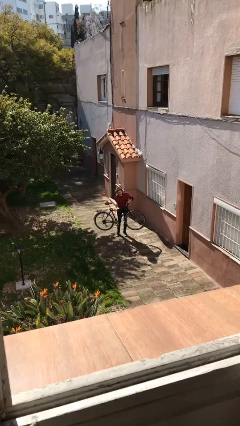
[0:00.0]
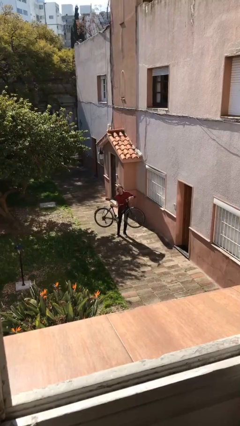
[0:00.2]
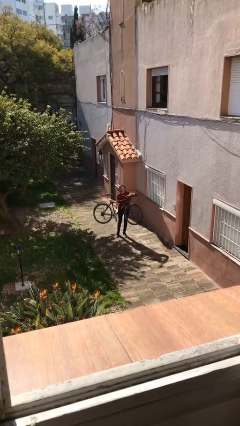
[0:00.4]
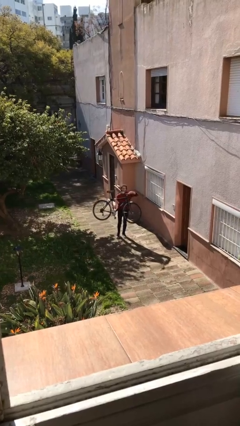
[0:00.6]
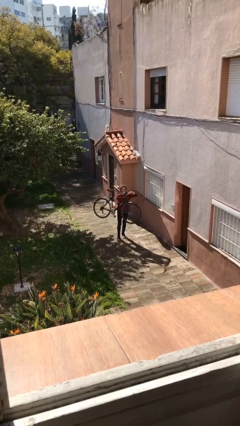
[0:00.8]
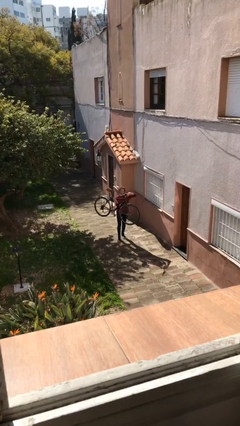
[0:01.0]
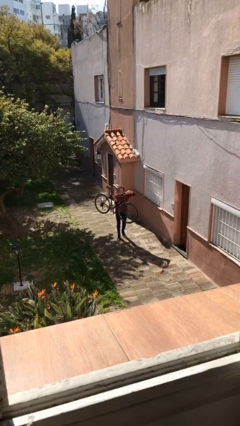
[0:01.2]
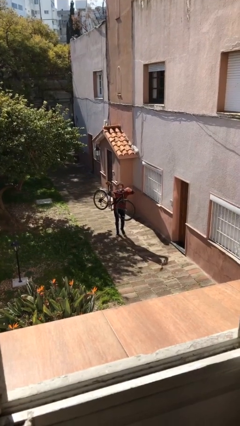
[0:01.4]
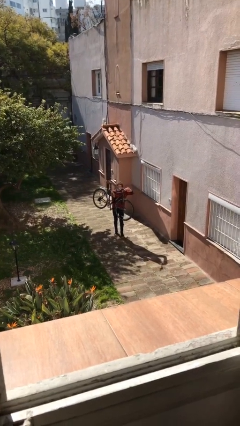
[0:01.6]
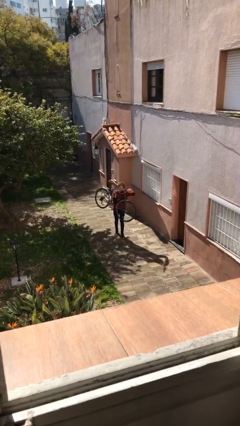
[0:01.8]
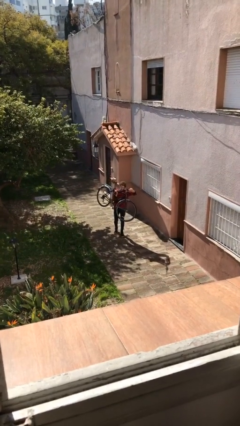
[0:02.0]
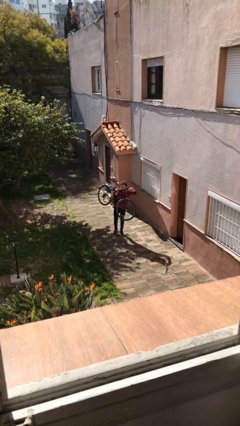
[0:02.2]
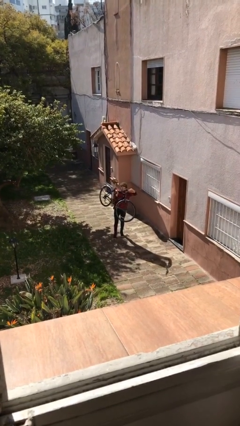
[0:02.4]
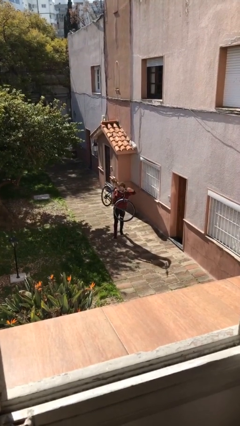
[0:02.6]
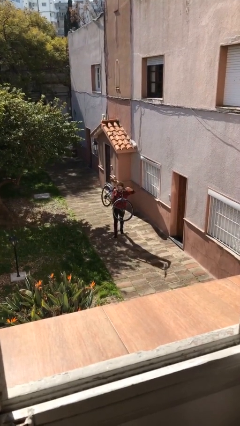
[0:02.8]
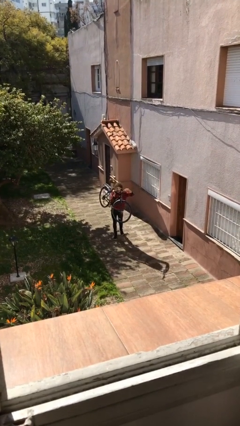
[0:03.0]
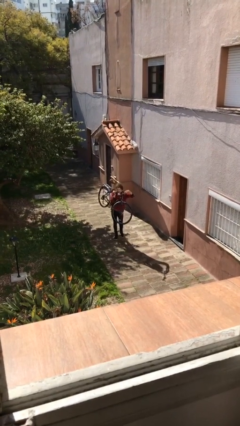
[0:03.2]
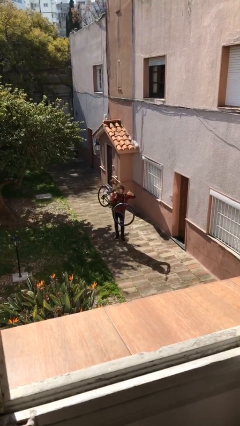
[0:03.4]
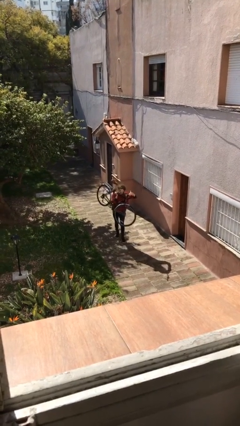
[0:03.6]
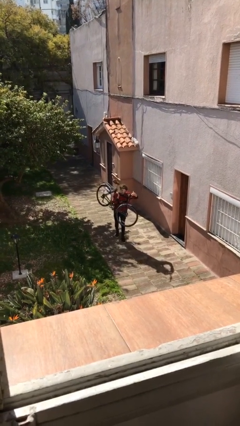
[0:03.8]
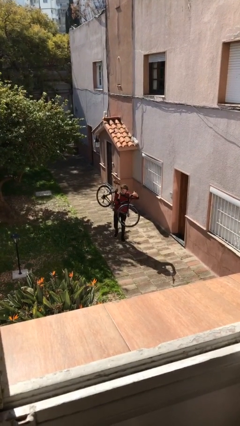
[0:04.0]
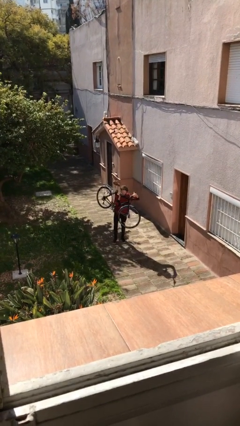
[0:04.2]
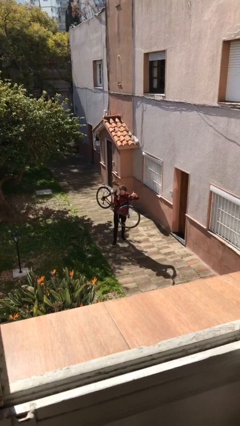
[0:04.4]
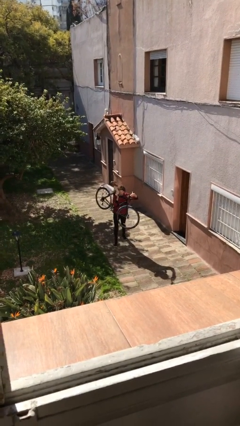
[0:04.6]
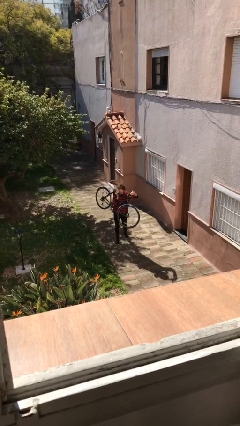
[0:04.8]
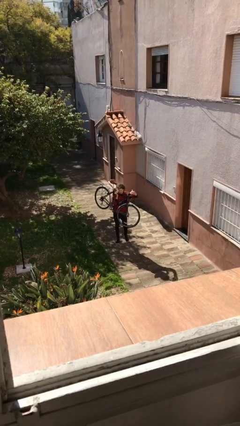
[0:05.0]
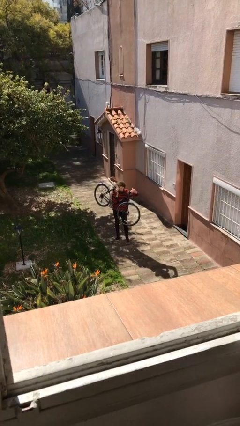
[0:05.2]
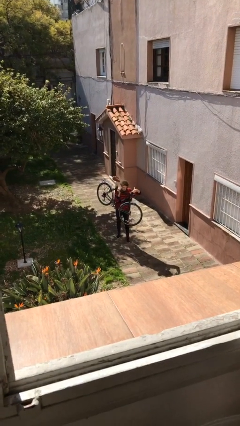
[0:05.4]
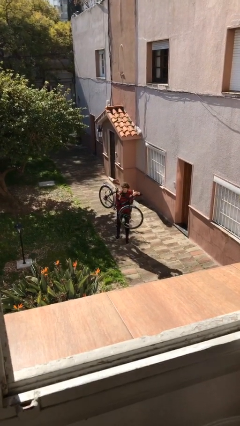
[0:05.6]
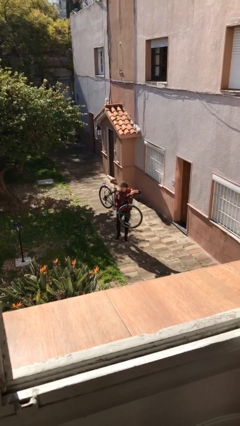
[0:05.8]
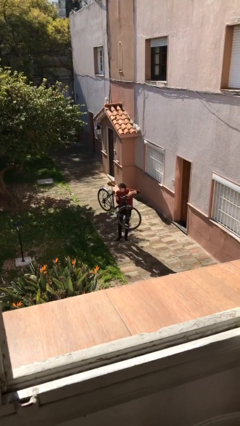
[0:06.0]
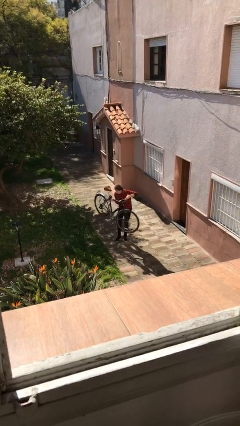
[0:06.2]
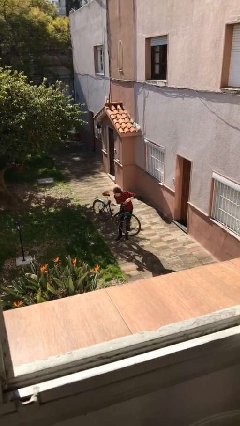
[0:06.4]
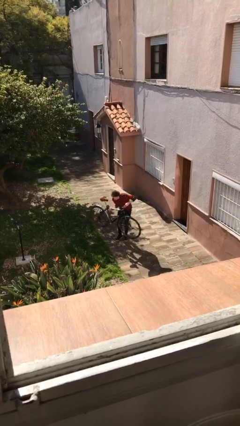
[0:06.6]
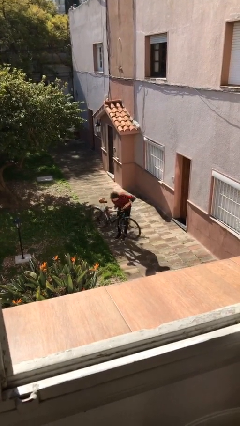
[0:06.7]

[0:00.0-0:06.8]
person carries heavy object

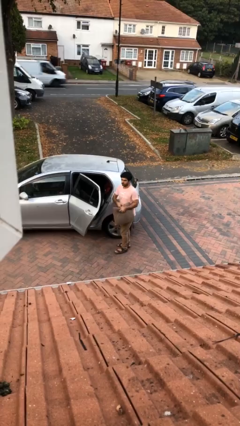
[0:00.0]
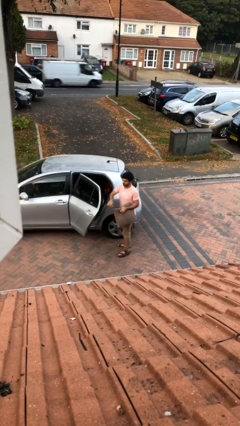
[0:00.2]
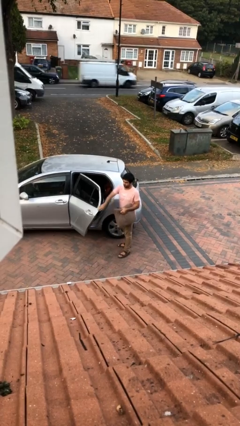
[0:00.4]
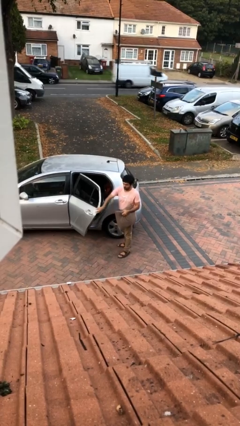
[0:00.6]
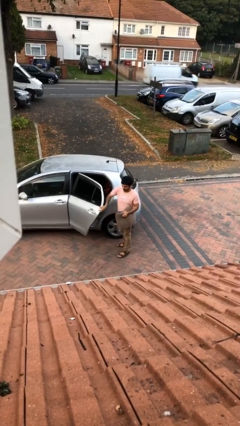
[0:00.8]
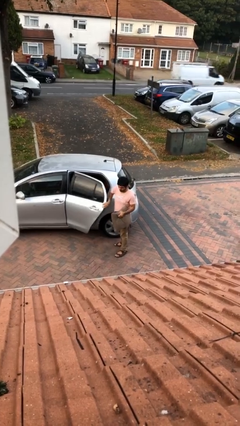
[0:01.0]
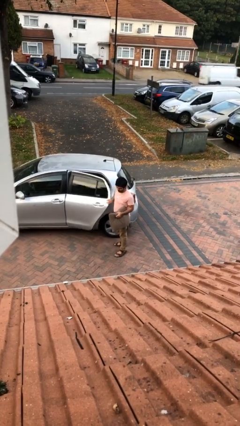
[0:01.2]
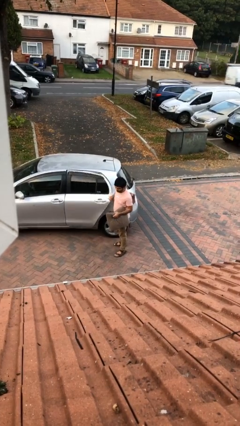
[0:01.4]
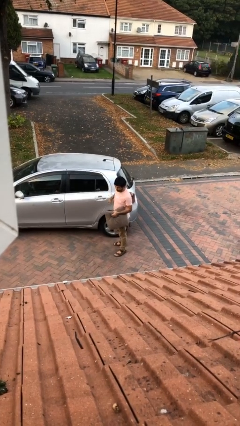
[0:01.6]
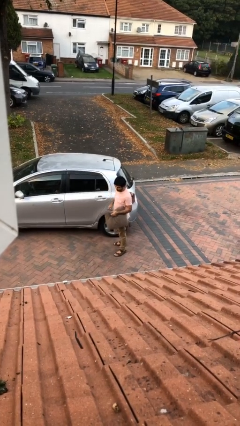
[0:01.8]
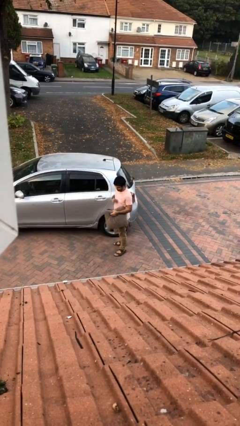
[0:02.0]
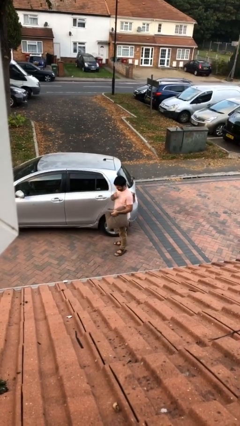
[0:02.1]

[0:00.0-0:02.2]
person closes car door

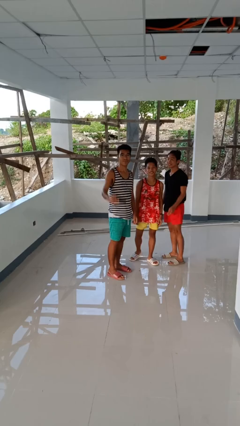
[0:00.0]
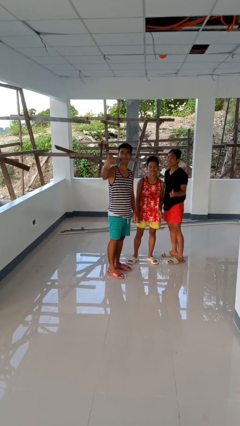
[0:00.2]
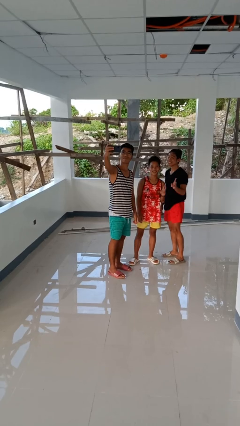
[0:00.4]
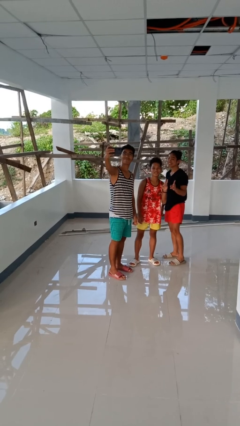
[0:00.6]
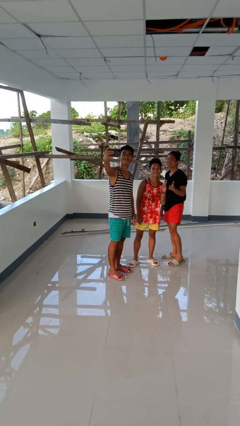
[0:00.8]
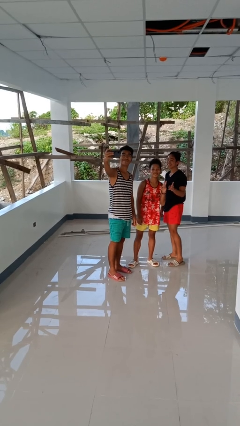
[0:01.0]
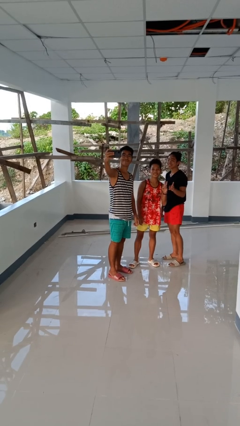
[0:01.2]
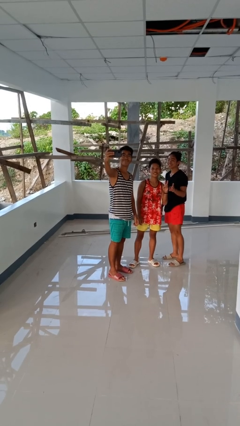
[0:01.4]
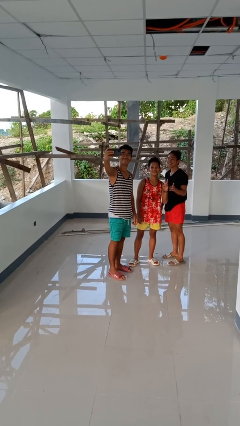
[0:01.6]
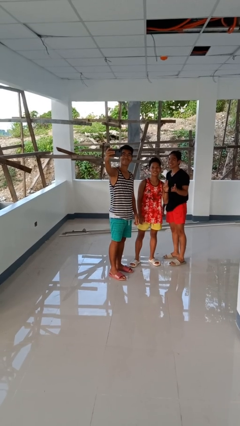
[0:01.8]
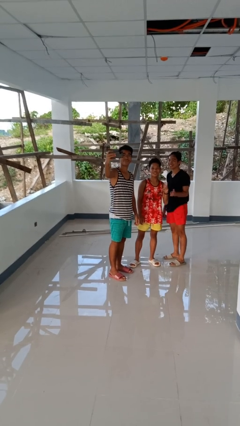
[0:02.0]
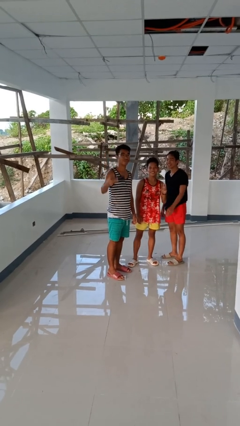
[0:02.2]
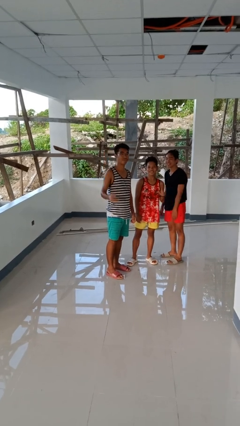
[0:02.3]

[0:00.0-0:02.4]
person takes selfie with person

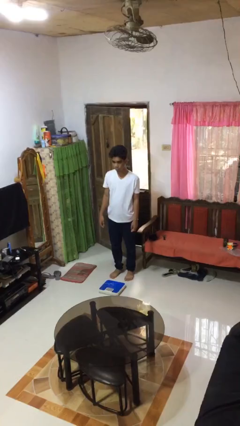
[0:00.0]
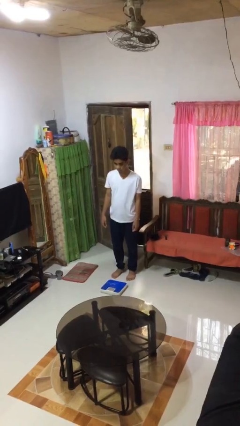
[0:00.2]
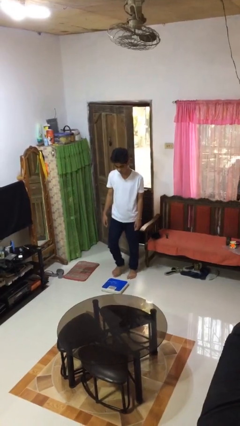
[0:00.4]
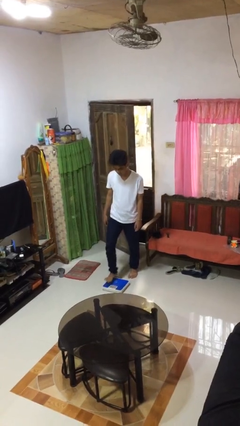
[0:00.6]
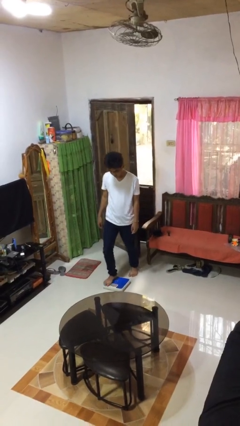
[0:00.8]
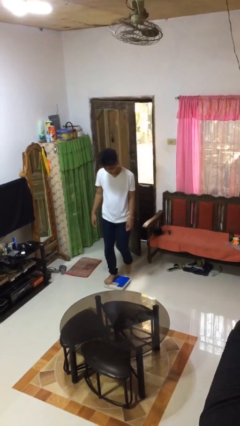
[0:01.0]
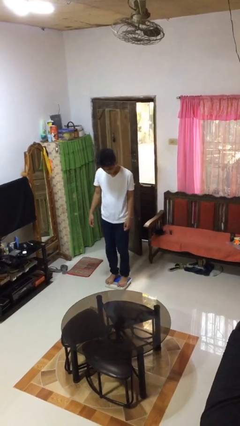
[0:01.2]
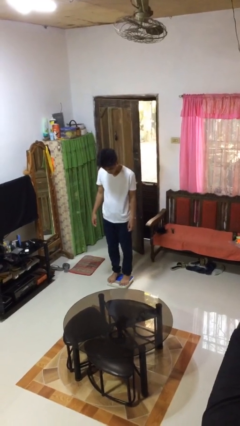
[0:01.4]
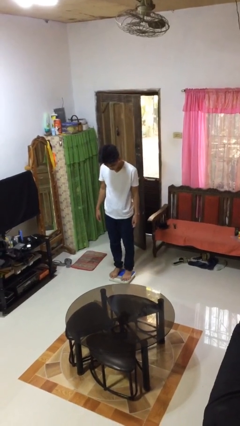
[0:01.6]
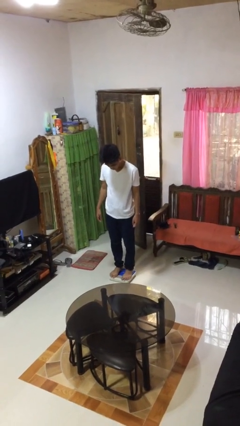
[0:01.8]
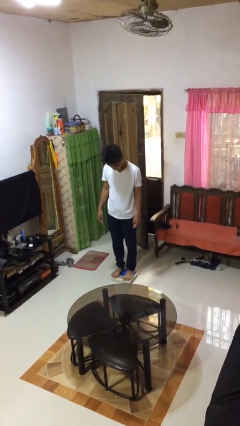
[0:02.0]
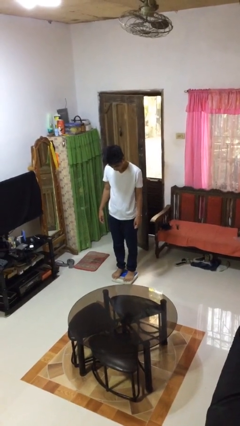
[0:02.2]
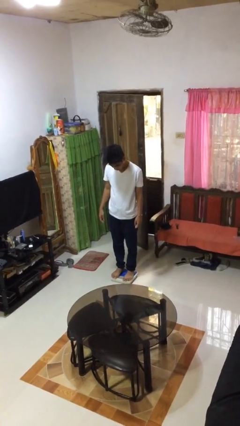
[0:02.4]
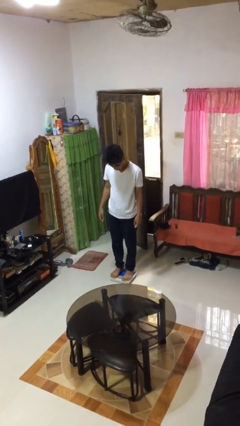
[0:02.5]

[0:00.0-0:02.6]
person uses bodyweight scale

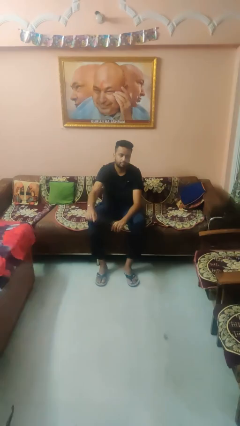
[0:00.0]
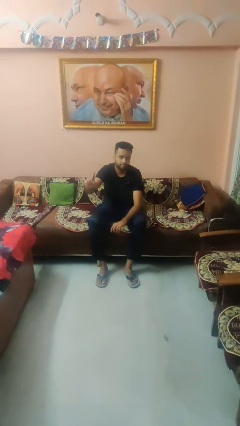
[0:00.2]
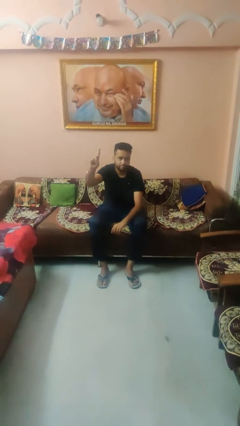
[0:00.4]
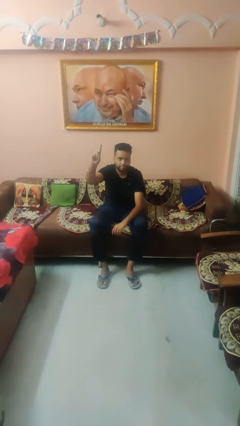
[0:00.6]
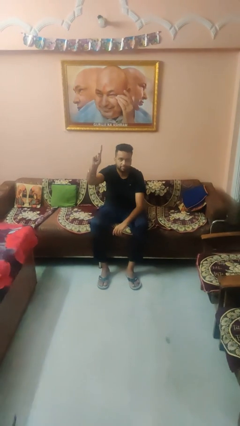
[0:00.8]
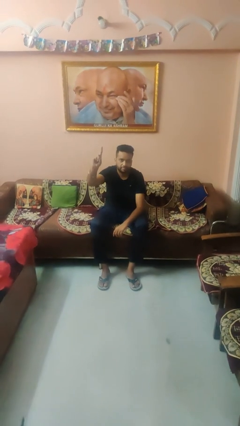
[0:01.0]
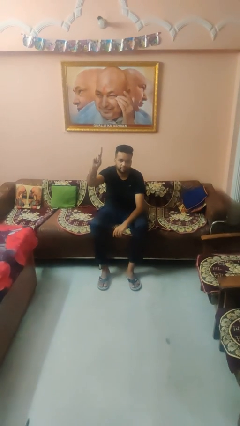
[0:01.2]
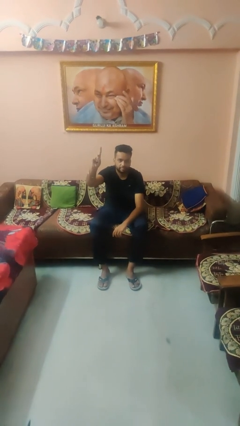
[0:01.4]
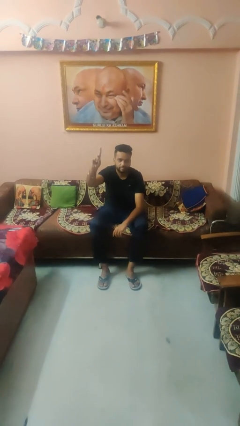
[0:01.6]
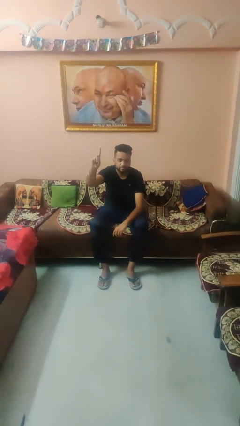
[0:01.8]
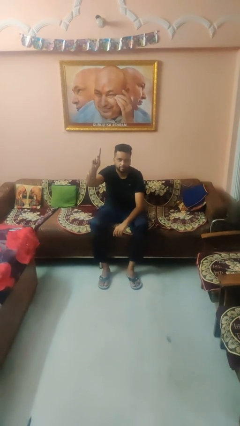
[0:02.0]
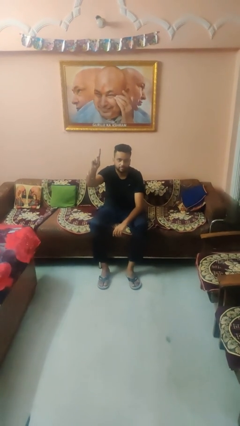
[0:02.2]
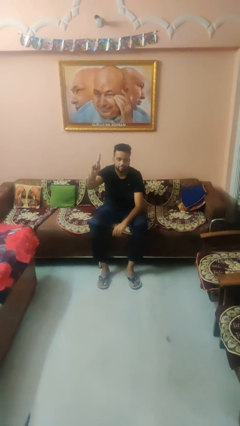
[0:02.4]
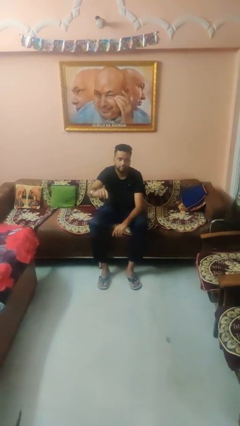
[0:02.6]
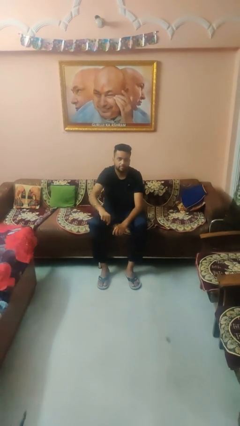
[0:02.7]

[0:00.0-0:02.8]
person gestures number one

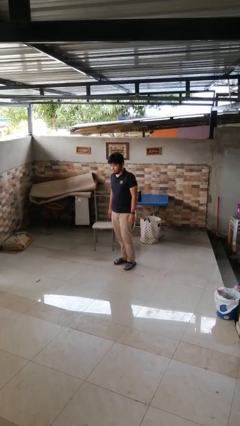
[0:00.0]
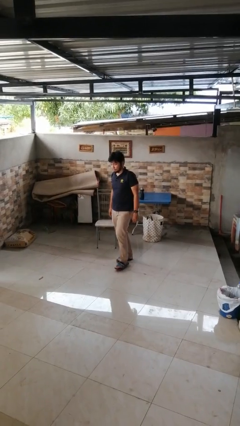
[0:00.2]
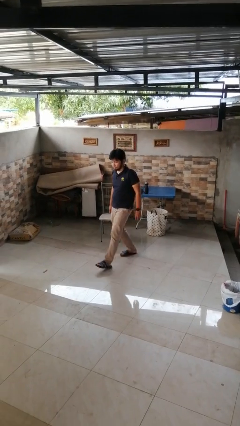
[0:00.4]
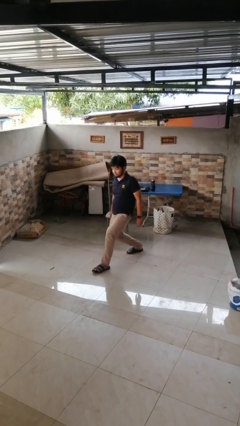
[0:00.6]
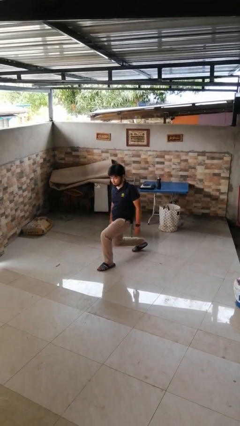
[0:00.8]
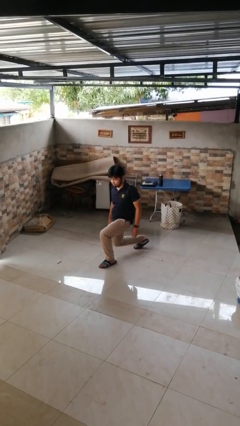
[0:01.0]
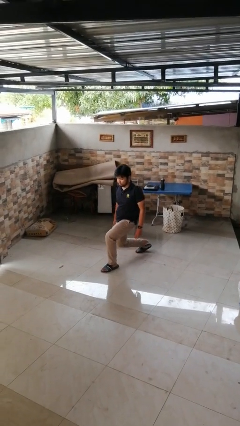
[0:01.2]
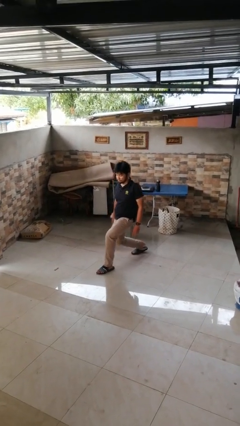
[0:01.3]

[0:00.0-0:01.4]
person exercises with lunges
